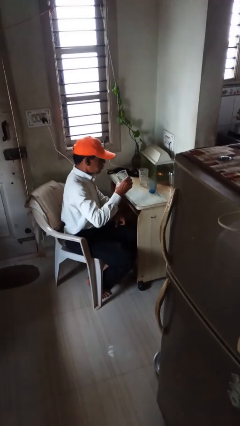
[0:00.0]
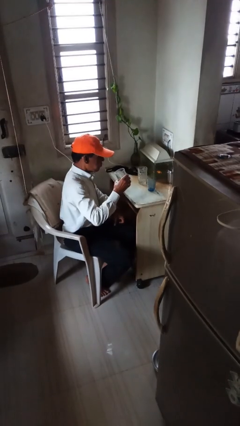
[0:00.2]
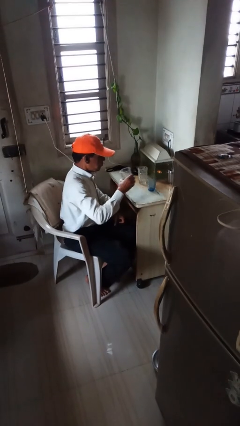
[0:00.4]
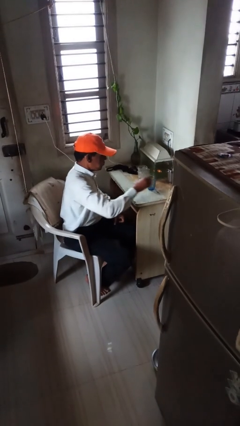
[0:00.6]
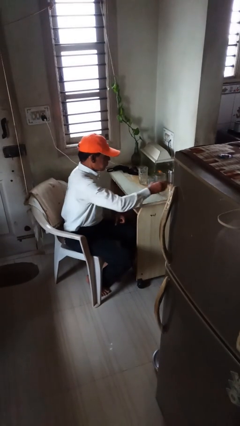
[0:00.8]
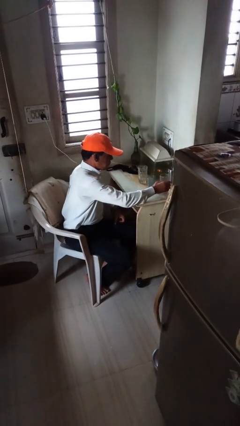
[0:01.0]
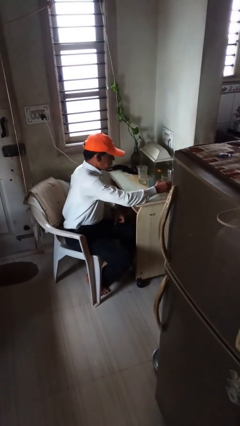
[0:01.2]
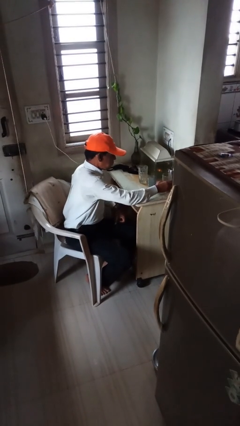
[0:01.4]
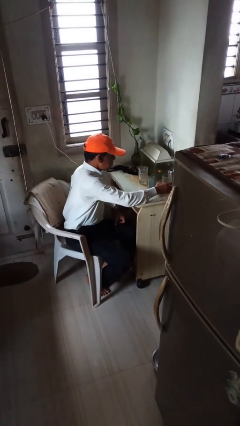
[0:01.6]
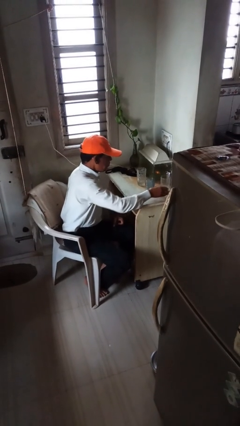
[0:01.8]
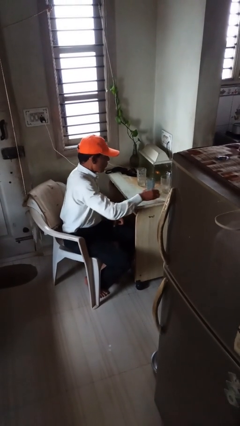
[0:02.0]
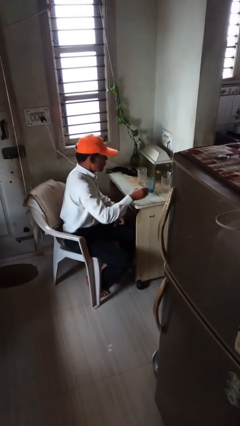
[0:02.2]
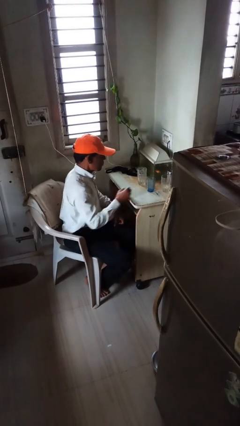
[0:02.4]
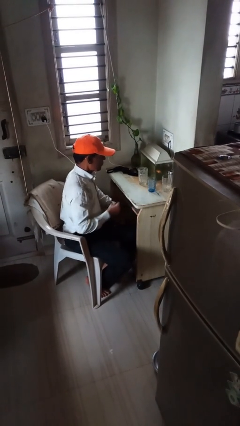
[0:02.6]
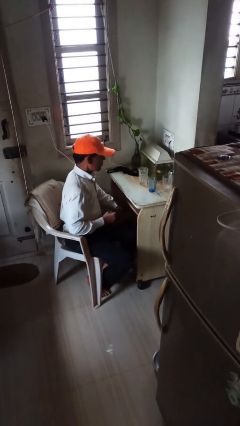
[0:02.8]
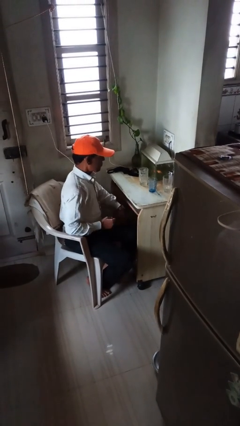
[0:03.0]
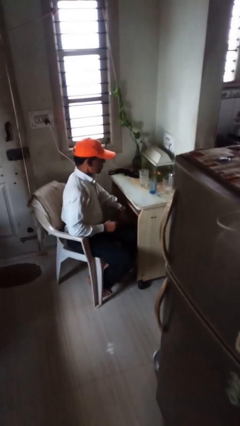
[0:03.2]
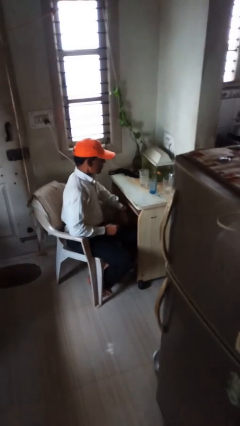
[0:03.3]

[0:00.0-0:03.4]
person puts down object on table

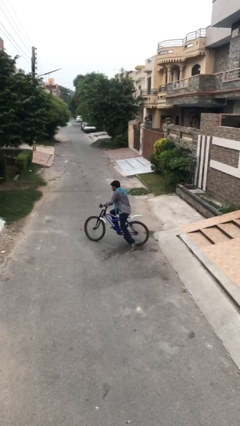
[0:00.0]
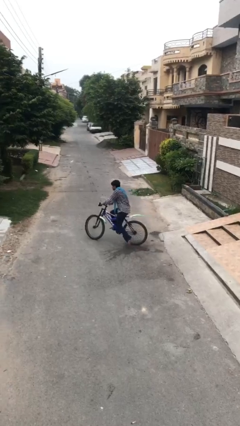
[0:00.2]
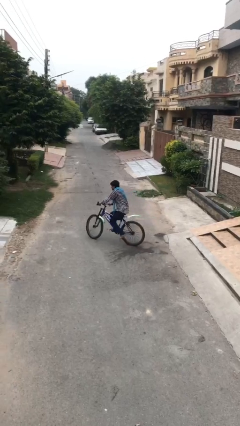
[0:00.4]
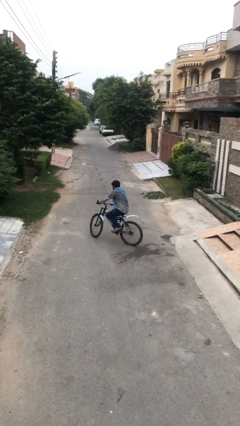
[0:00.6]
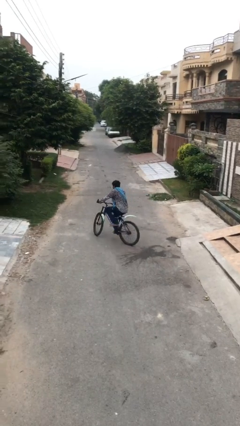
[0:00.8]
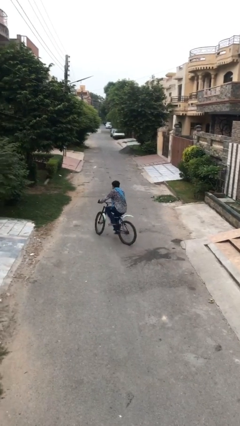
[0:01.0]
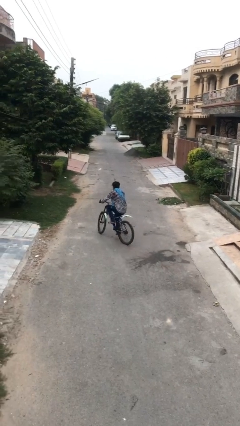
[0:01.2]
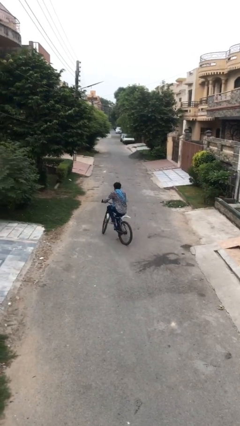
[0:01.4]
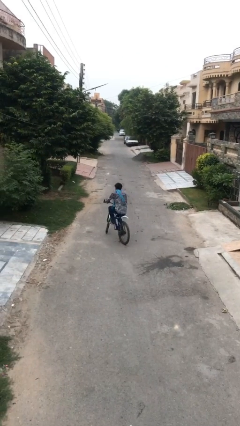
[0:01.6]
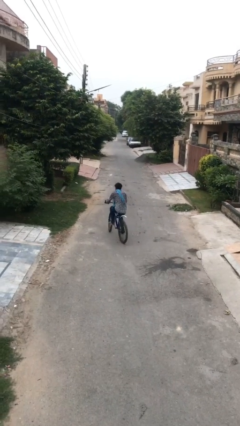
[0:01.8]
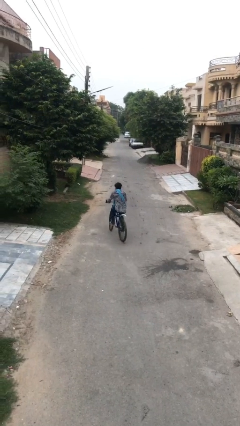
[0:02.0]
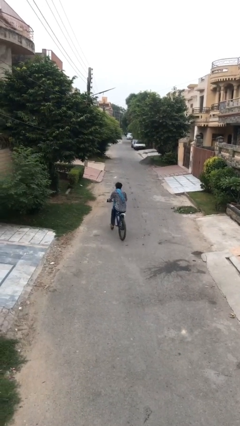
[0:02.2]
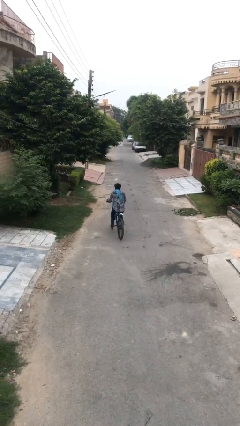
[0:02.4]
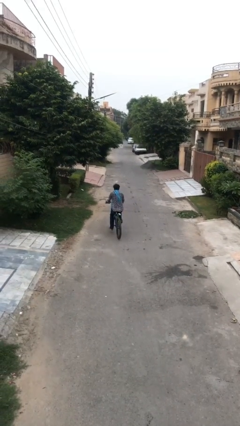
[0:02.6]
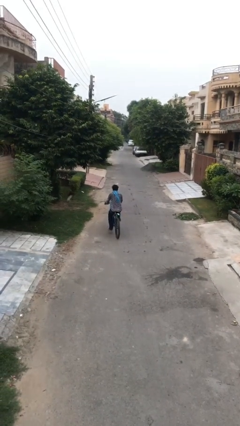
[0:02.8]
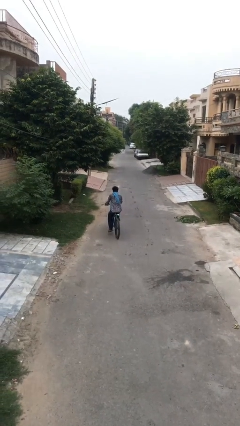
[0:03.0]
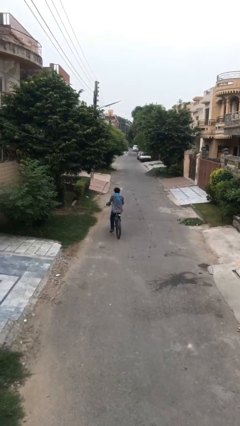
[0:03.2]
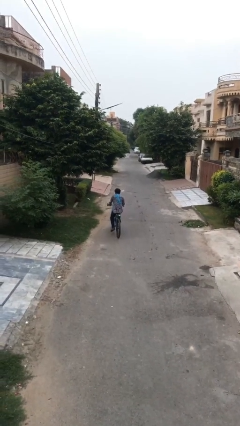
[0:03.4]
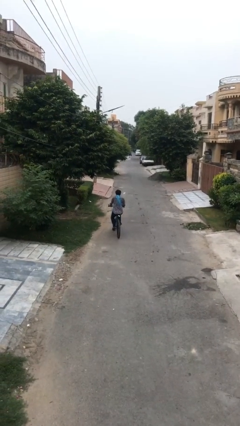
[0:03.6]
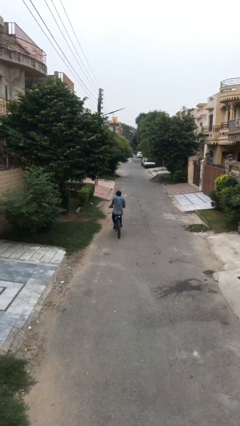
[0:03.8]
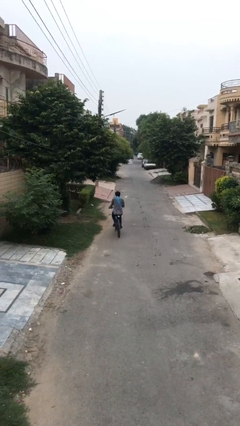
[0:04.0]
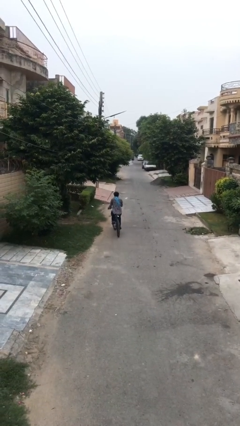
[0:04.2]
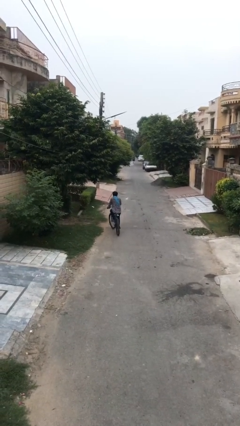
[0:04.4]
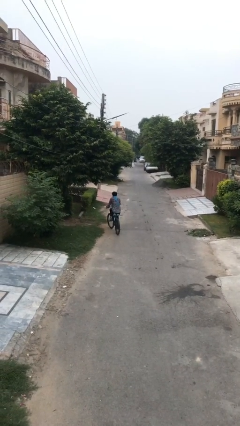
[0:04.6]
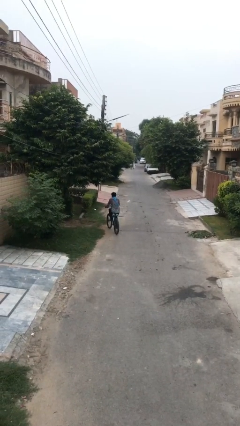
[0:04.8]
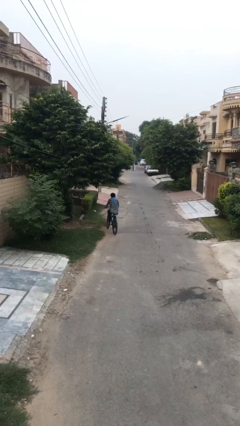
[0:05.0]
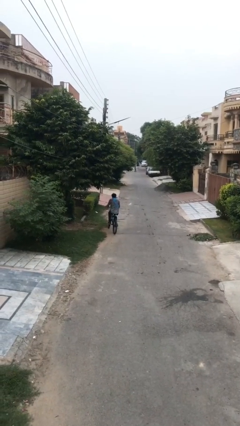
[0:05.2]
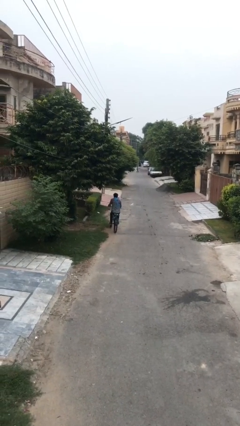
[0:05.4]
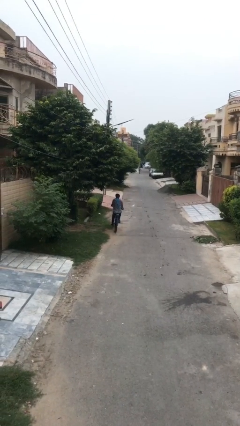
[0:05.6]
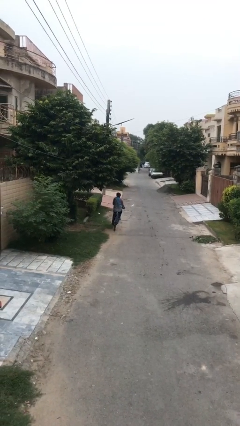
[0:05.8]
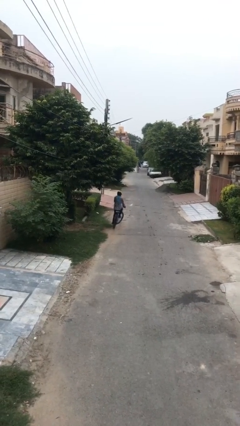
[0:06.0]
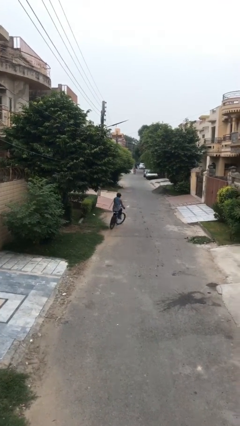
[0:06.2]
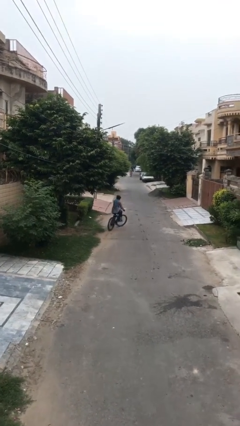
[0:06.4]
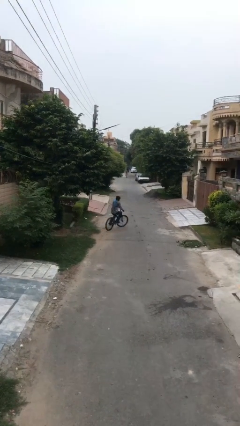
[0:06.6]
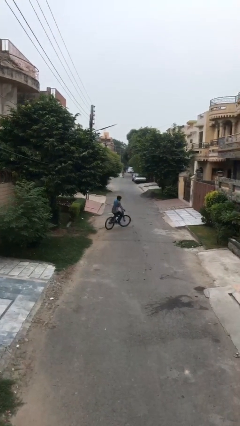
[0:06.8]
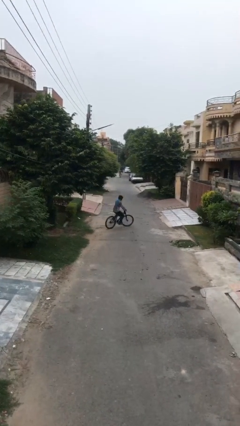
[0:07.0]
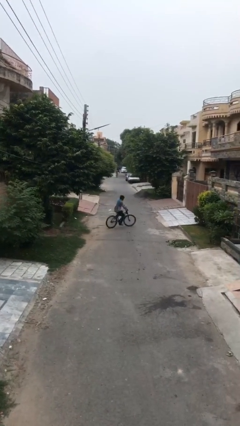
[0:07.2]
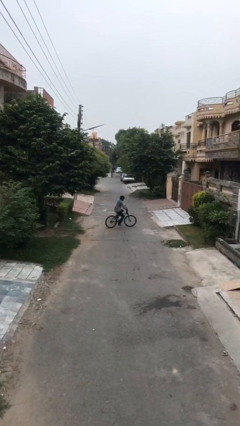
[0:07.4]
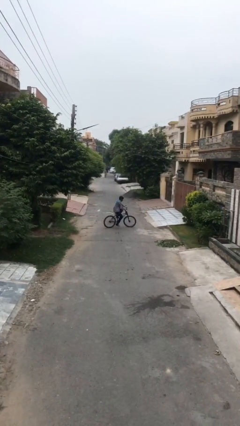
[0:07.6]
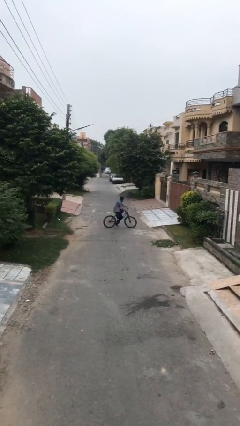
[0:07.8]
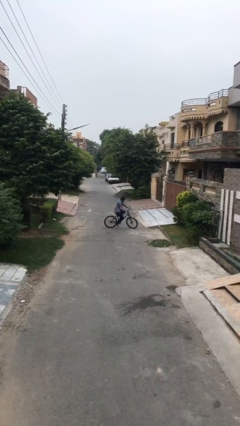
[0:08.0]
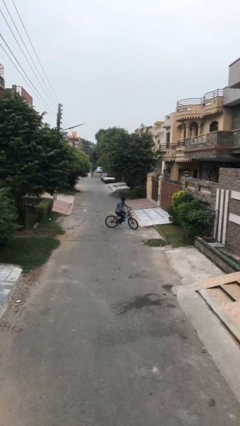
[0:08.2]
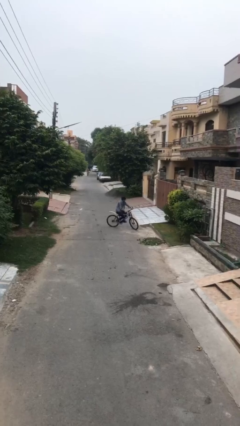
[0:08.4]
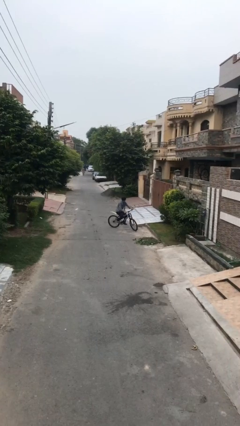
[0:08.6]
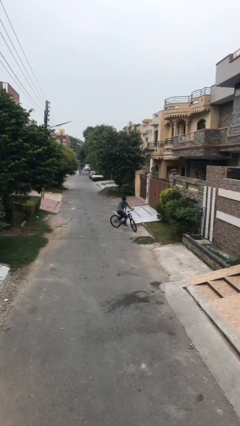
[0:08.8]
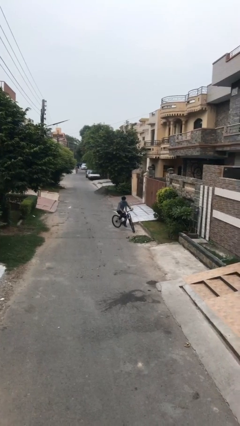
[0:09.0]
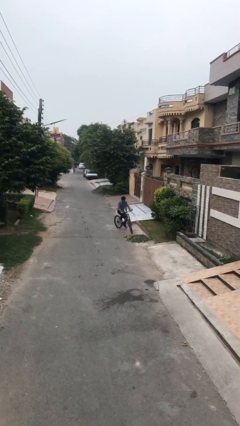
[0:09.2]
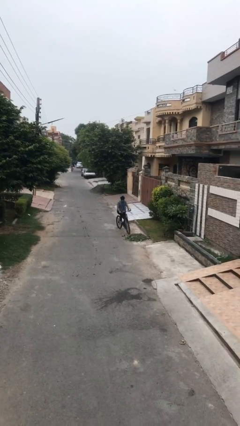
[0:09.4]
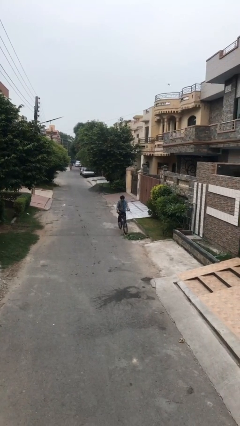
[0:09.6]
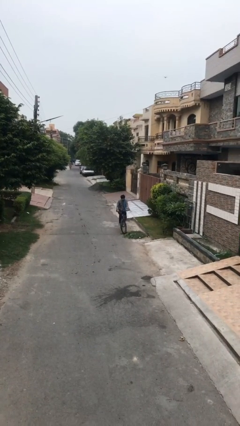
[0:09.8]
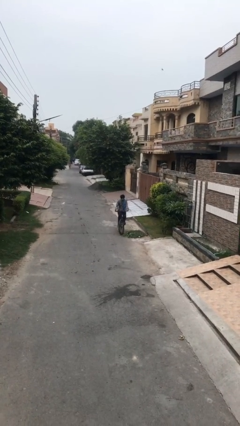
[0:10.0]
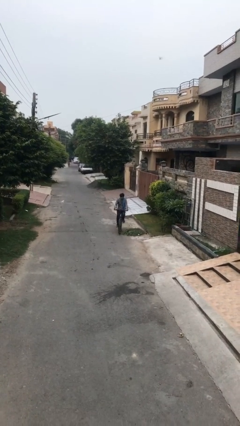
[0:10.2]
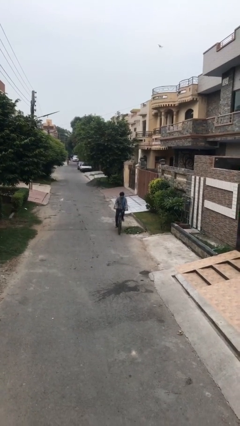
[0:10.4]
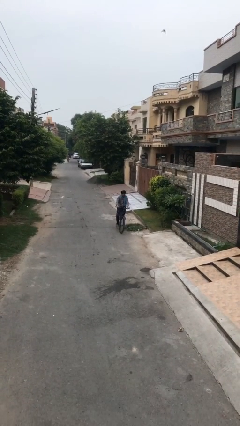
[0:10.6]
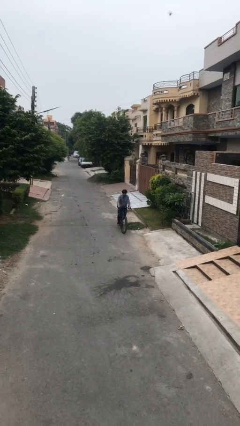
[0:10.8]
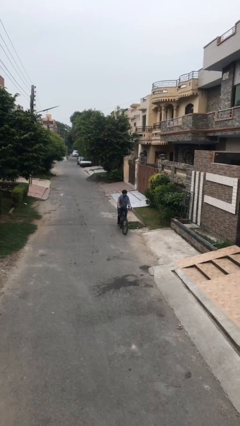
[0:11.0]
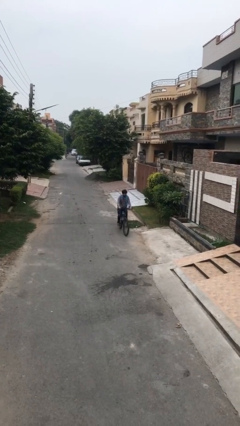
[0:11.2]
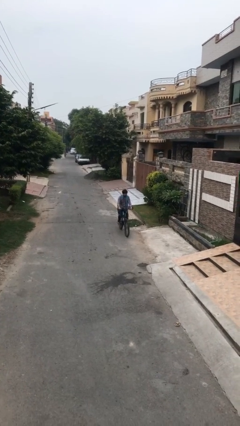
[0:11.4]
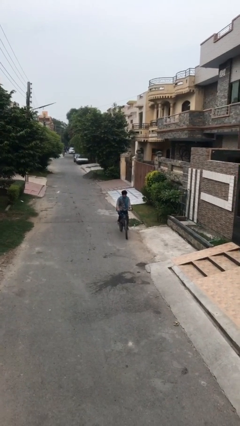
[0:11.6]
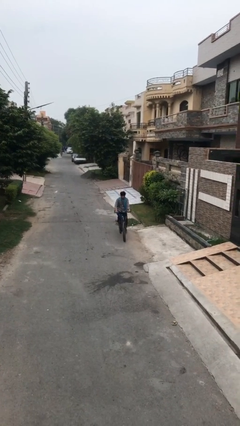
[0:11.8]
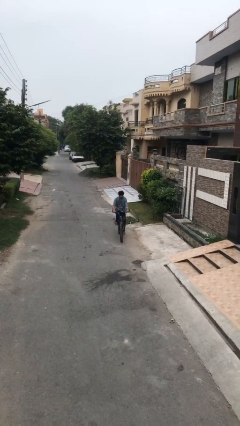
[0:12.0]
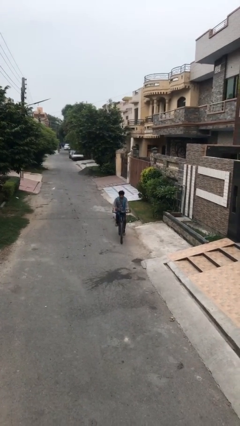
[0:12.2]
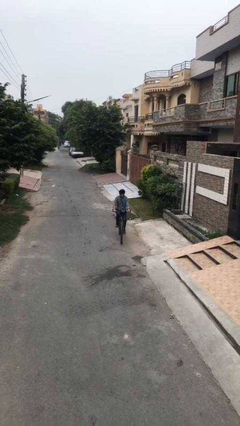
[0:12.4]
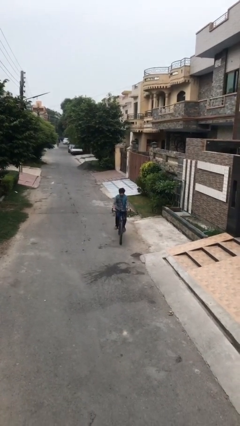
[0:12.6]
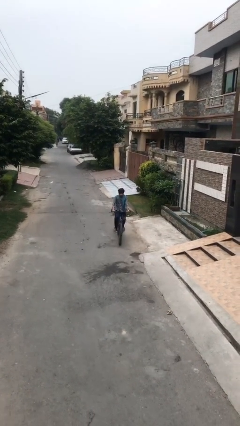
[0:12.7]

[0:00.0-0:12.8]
person rides bicycle

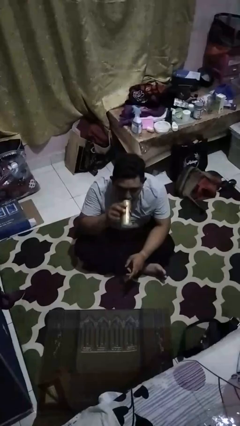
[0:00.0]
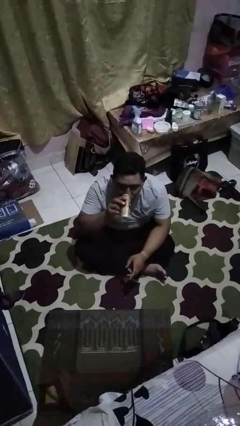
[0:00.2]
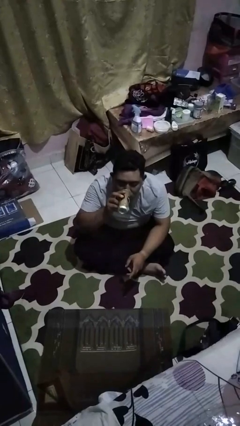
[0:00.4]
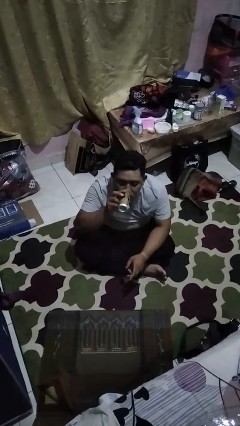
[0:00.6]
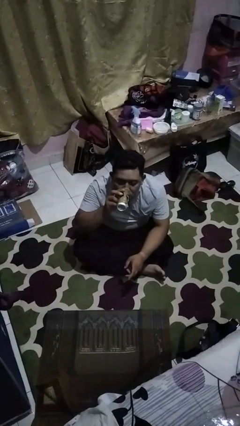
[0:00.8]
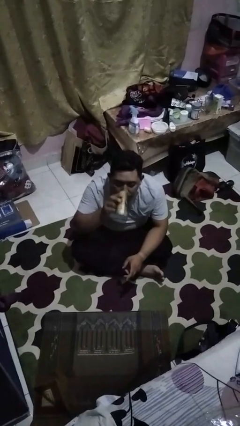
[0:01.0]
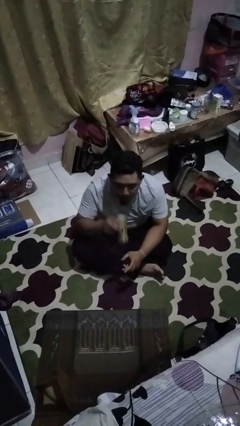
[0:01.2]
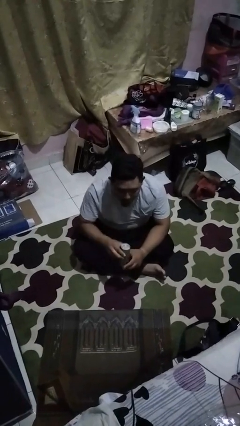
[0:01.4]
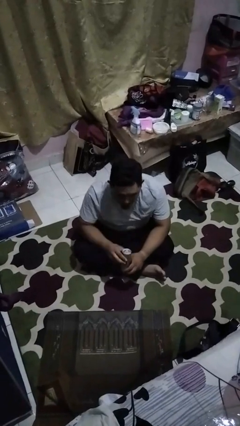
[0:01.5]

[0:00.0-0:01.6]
person drinks from beverage can
